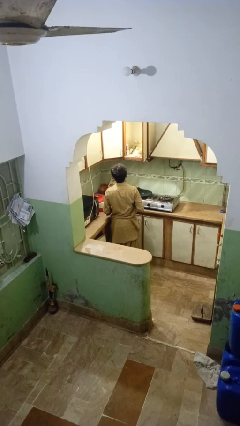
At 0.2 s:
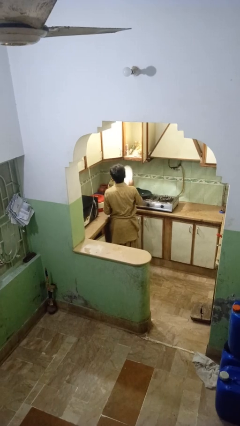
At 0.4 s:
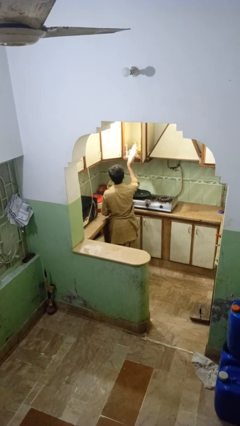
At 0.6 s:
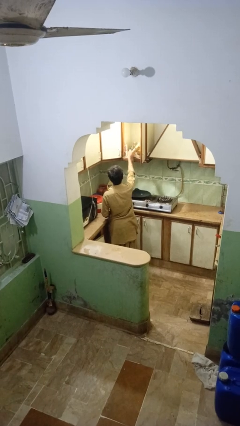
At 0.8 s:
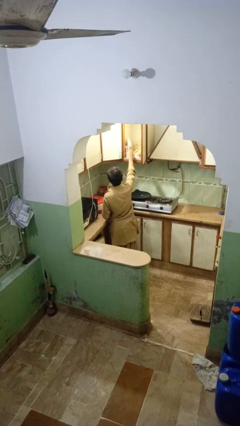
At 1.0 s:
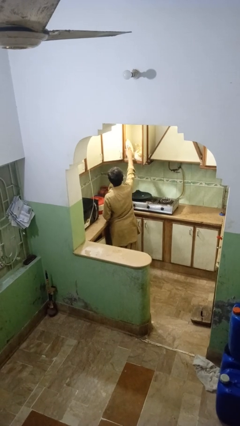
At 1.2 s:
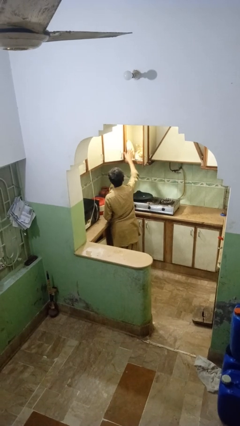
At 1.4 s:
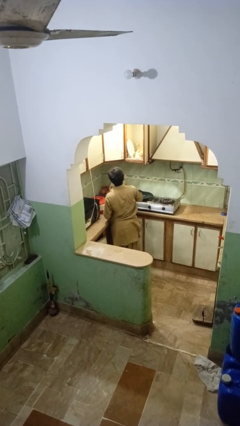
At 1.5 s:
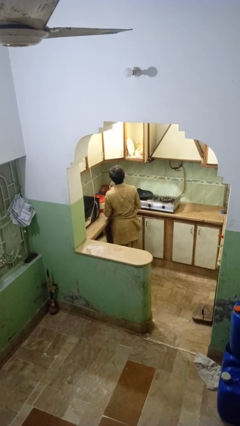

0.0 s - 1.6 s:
person puts object in cabinet

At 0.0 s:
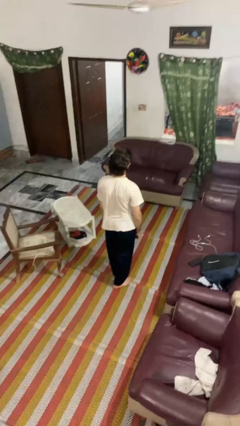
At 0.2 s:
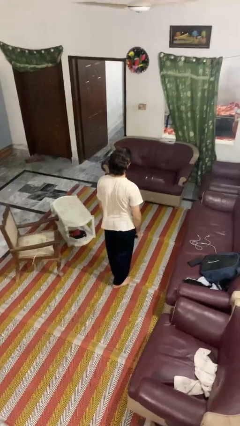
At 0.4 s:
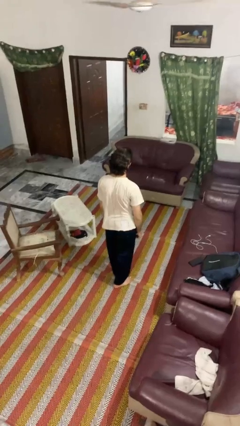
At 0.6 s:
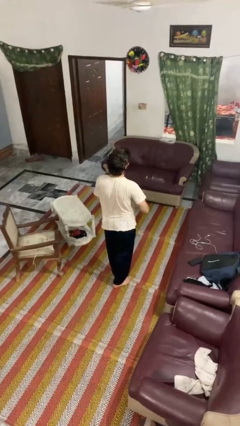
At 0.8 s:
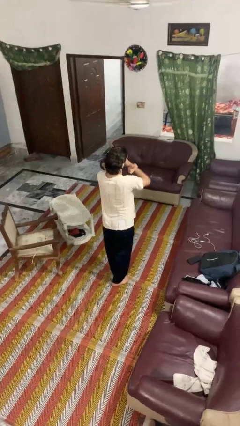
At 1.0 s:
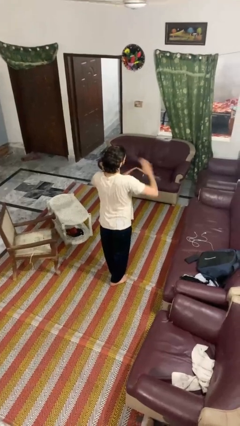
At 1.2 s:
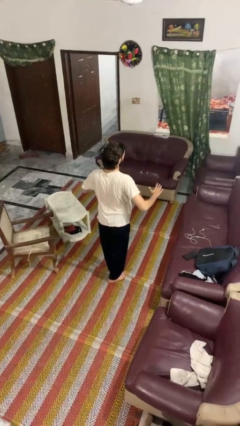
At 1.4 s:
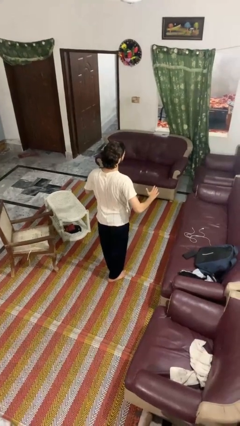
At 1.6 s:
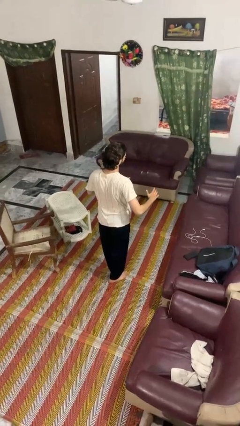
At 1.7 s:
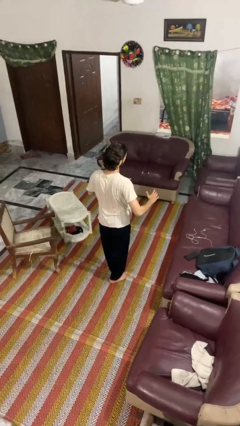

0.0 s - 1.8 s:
person karate chop

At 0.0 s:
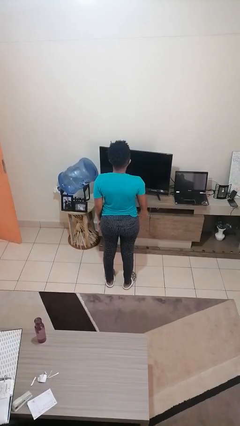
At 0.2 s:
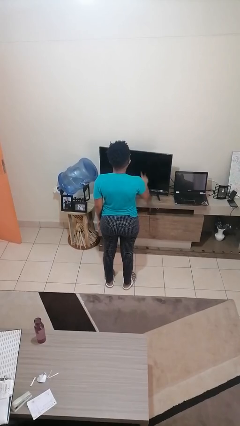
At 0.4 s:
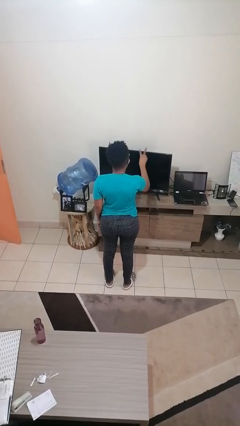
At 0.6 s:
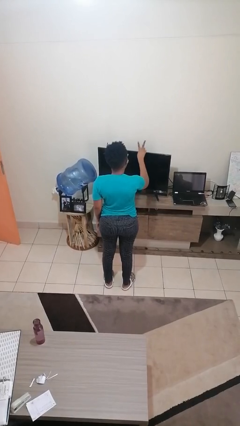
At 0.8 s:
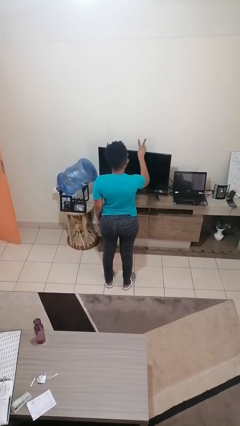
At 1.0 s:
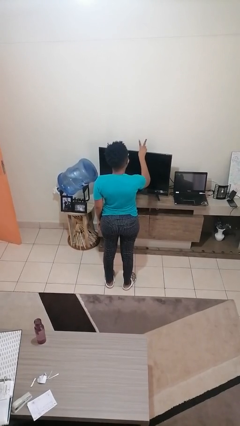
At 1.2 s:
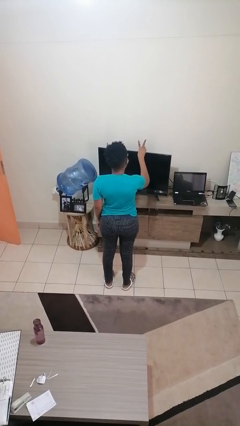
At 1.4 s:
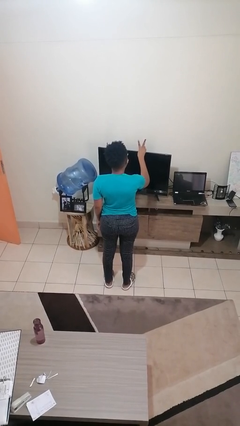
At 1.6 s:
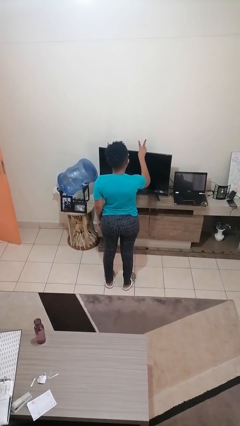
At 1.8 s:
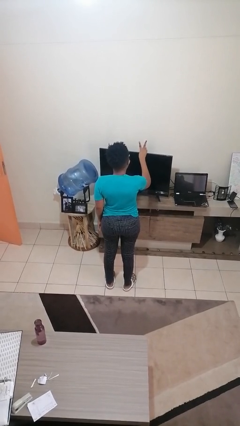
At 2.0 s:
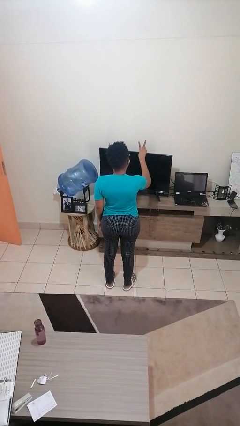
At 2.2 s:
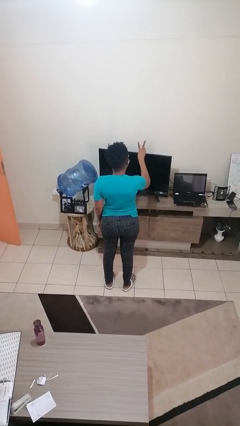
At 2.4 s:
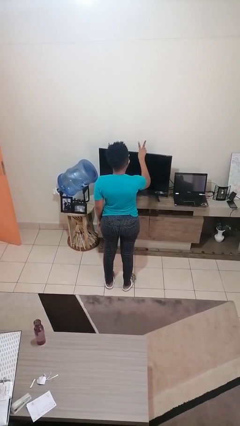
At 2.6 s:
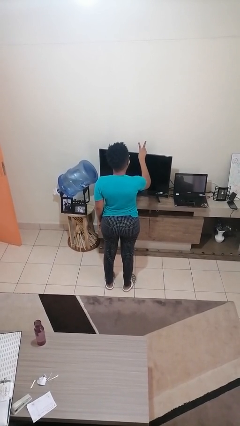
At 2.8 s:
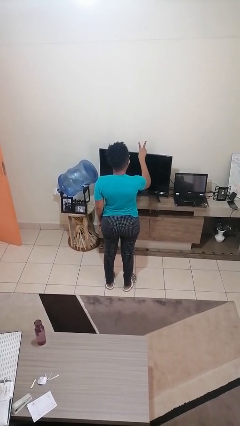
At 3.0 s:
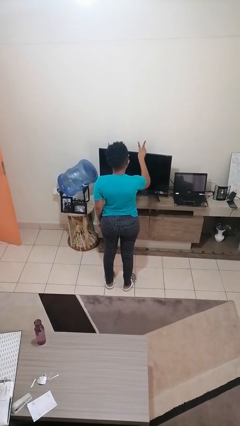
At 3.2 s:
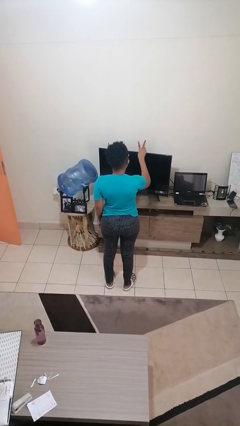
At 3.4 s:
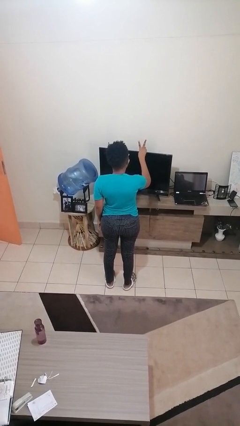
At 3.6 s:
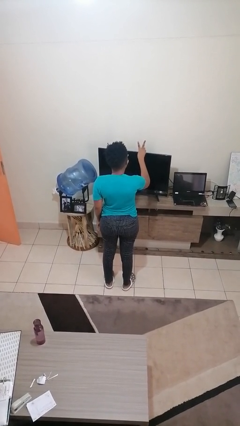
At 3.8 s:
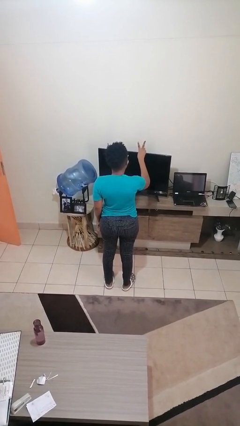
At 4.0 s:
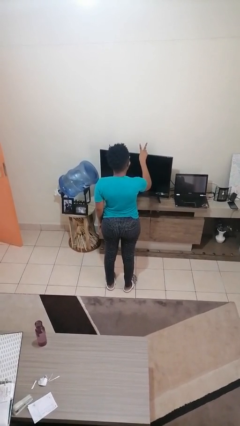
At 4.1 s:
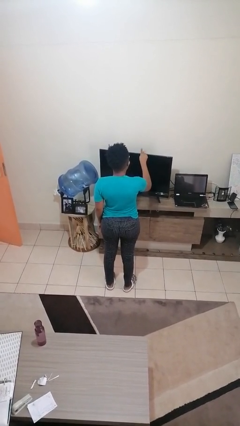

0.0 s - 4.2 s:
person gestures peace

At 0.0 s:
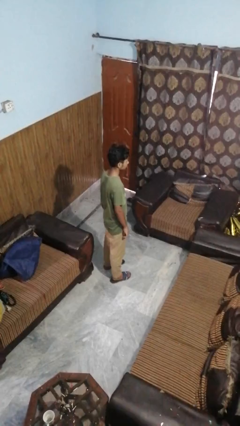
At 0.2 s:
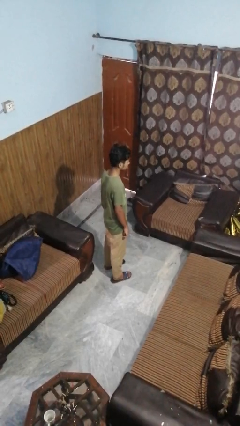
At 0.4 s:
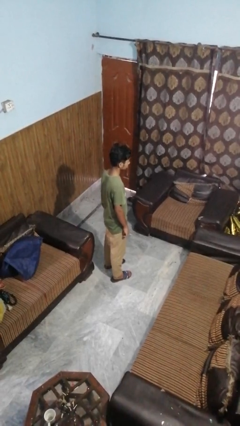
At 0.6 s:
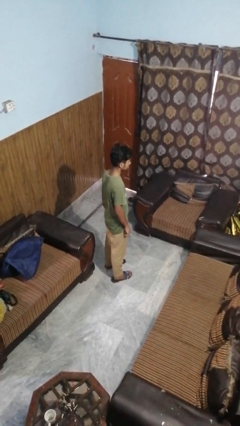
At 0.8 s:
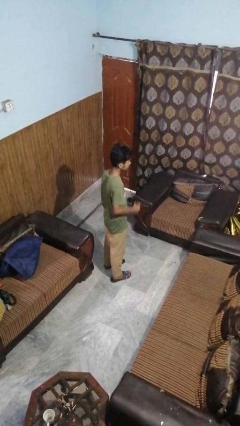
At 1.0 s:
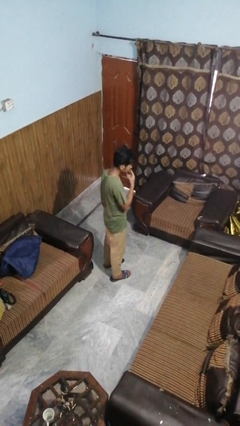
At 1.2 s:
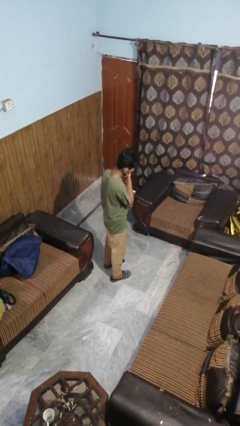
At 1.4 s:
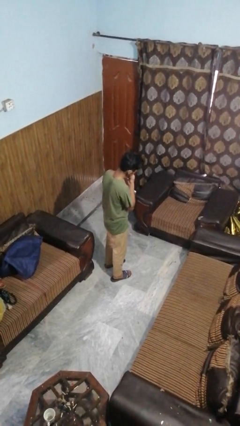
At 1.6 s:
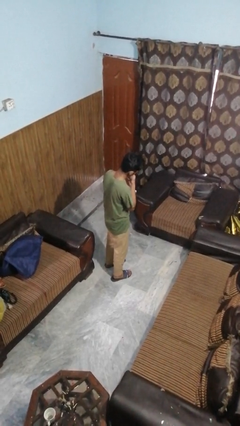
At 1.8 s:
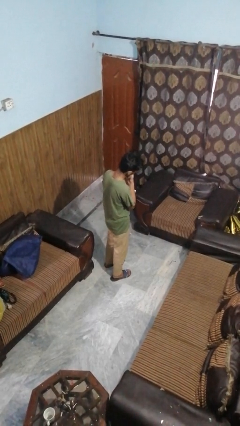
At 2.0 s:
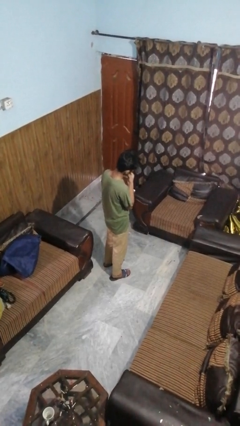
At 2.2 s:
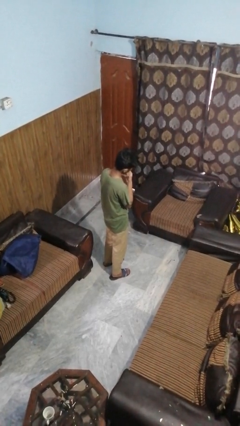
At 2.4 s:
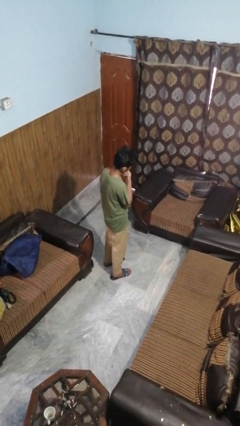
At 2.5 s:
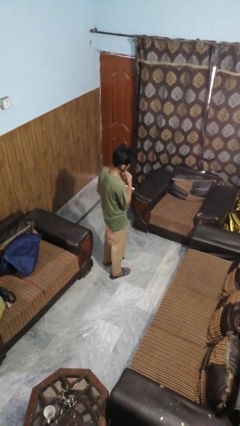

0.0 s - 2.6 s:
person strokes chin

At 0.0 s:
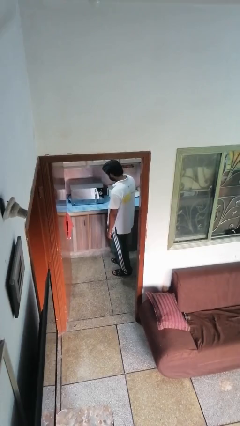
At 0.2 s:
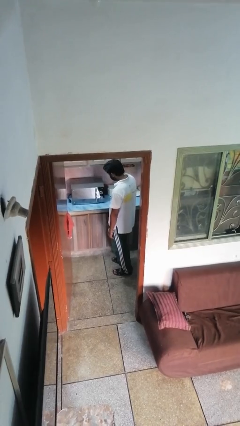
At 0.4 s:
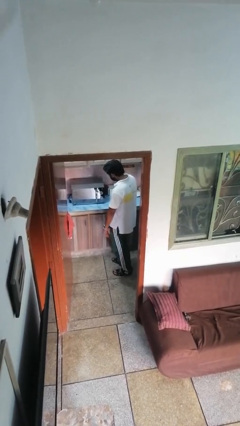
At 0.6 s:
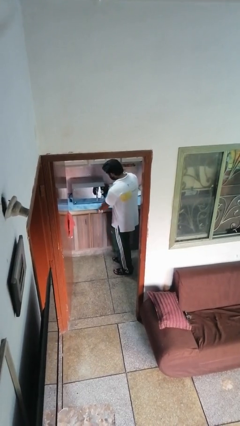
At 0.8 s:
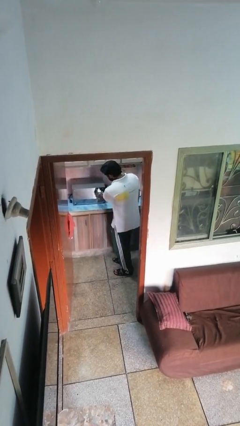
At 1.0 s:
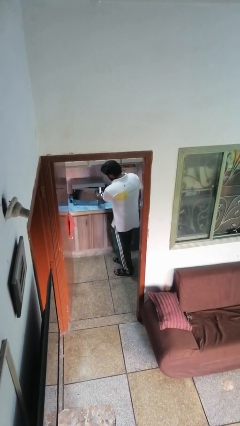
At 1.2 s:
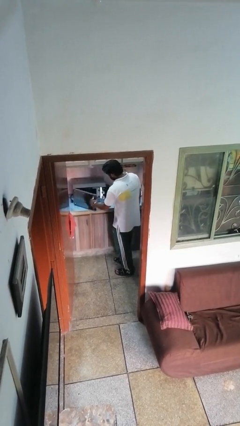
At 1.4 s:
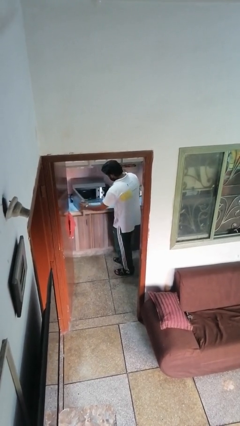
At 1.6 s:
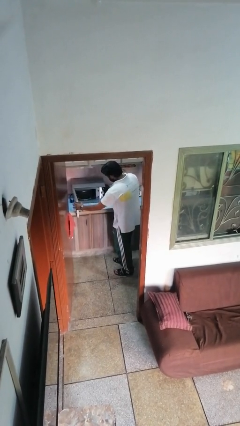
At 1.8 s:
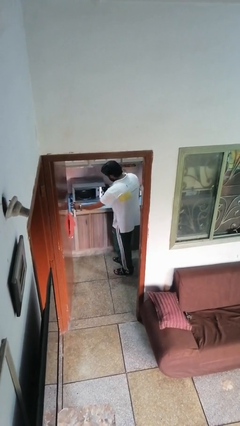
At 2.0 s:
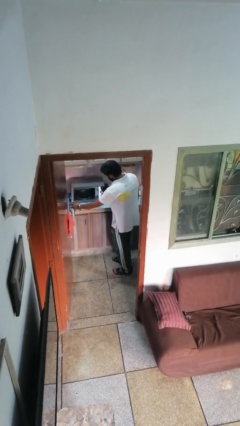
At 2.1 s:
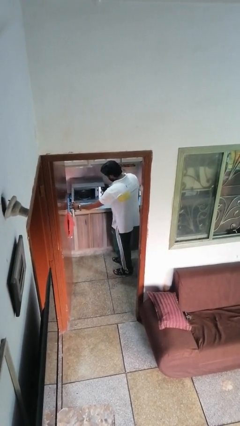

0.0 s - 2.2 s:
person opens microwave

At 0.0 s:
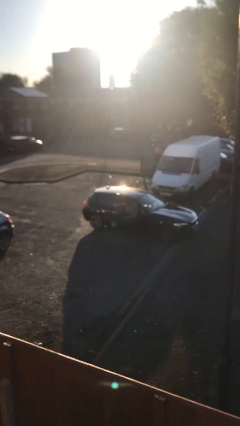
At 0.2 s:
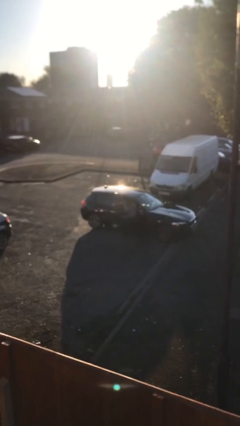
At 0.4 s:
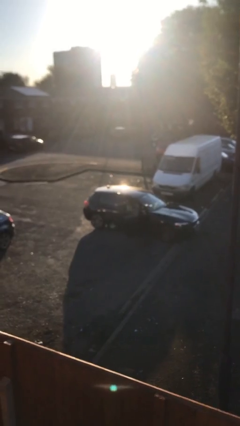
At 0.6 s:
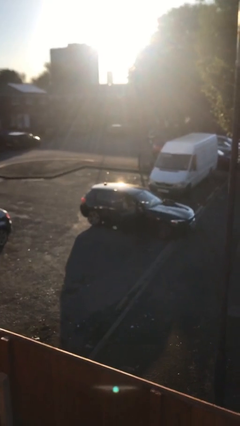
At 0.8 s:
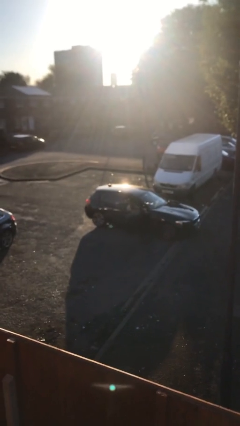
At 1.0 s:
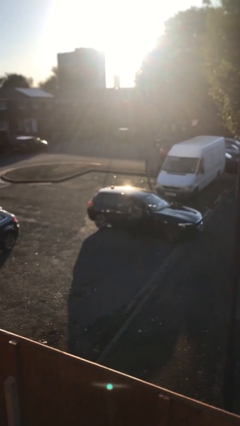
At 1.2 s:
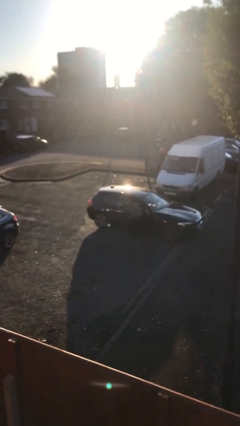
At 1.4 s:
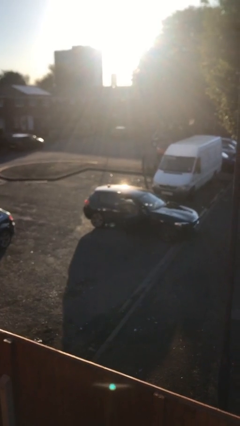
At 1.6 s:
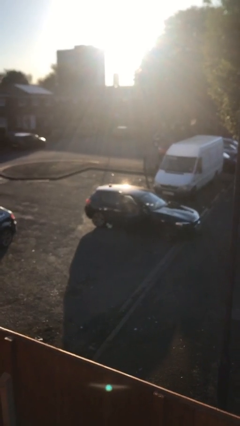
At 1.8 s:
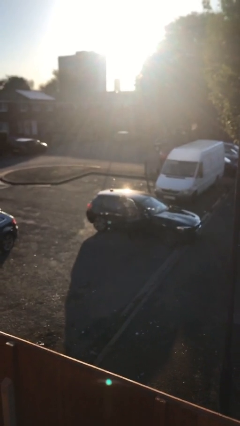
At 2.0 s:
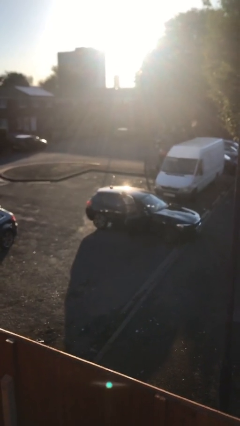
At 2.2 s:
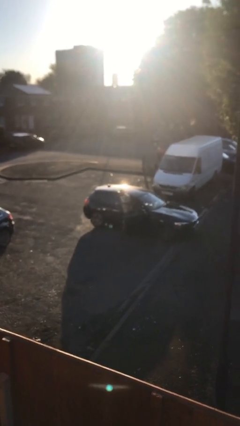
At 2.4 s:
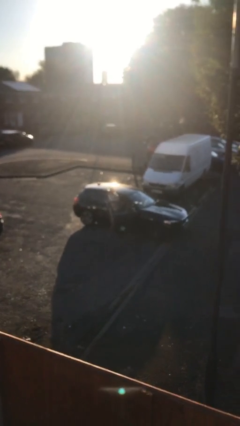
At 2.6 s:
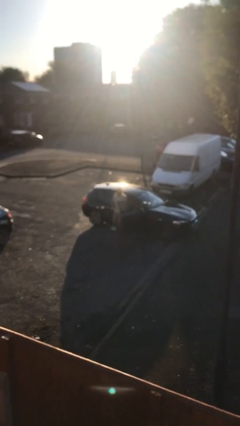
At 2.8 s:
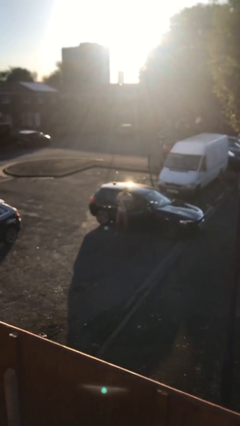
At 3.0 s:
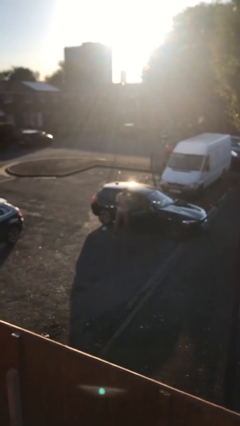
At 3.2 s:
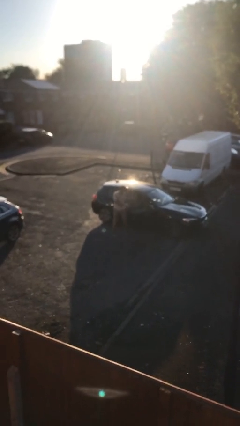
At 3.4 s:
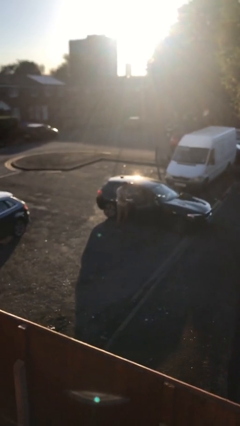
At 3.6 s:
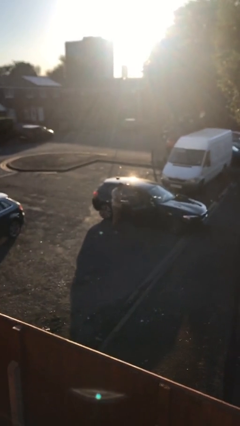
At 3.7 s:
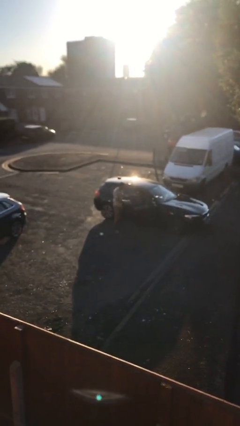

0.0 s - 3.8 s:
person exits car

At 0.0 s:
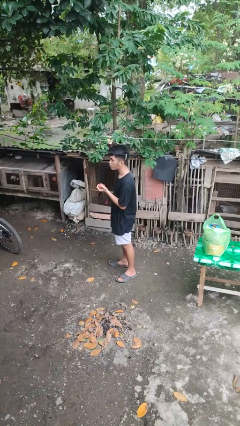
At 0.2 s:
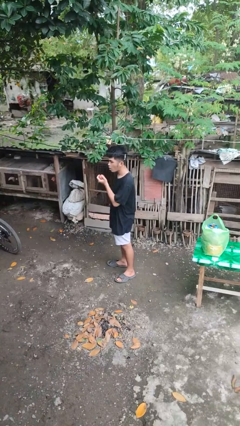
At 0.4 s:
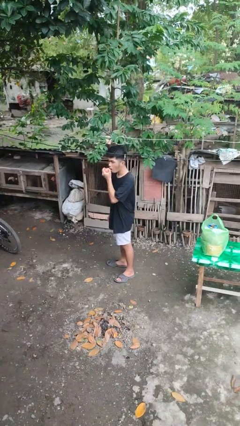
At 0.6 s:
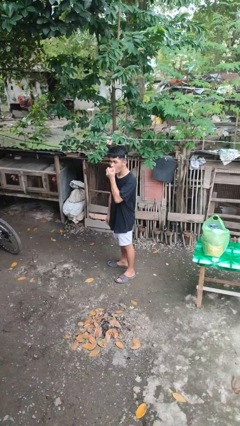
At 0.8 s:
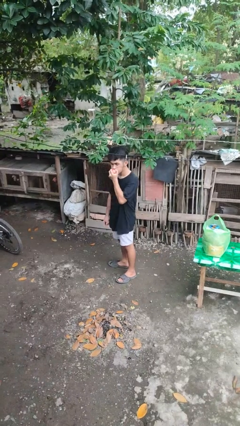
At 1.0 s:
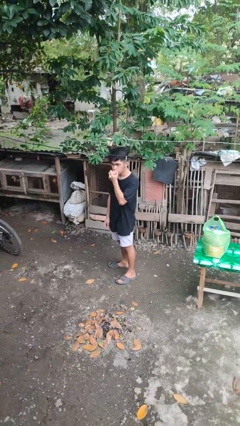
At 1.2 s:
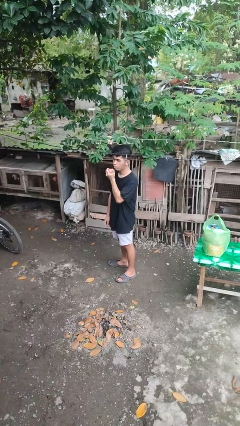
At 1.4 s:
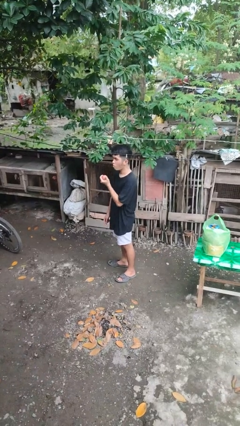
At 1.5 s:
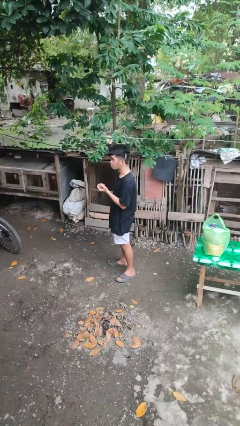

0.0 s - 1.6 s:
person eats apple
